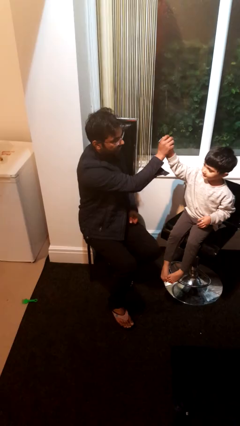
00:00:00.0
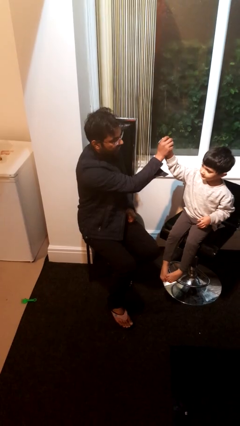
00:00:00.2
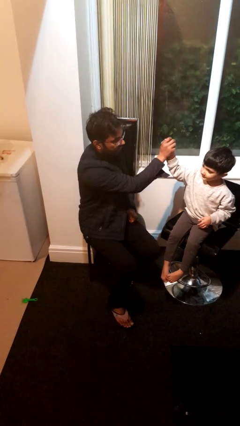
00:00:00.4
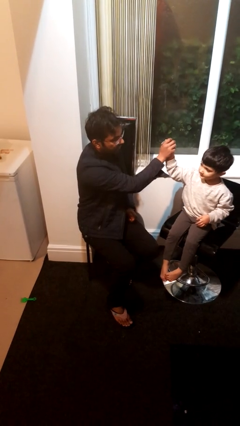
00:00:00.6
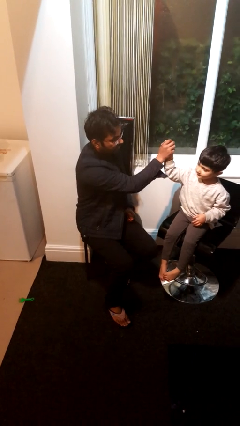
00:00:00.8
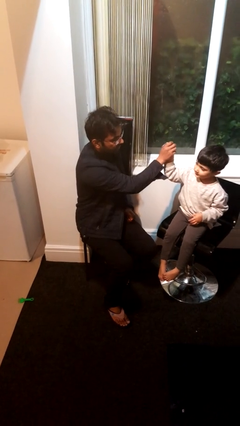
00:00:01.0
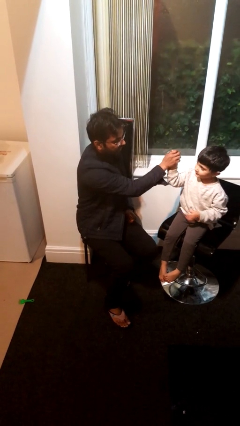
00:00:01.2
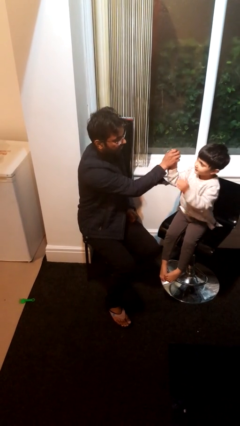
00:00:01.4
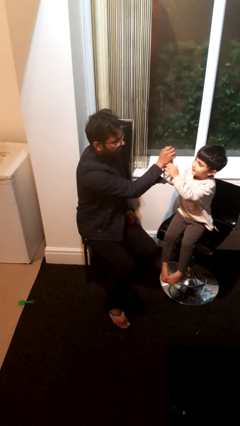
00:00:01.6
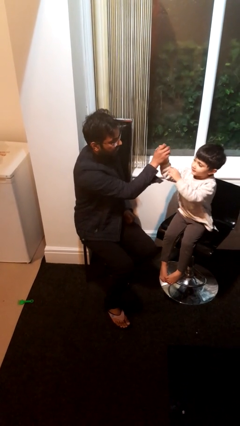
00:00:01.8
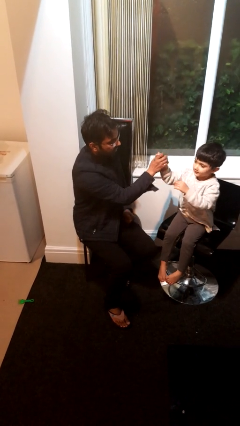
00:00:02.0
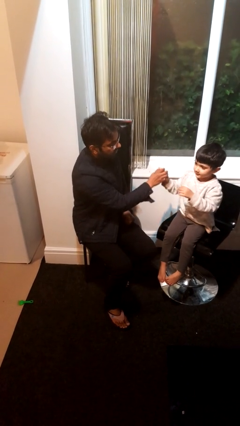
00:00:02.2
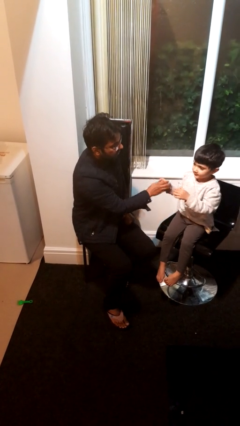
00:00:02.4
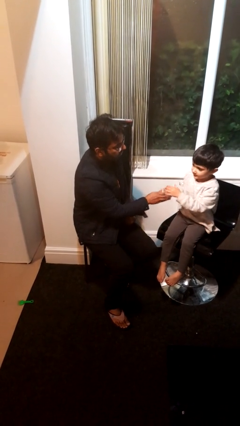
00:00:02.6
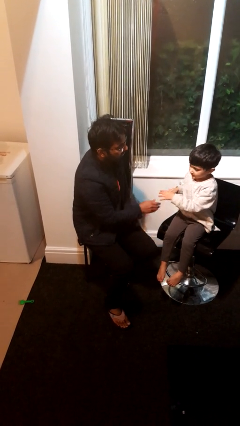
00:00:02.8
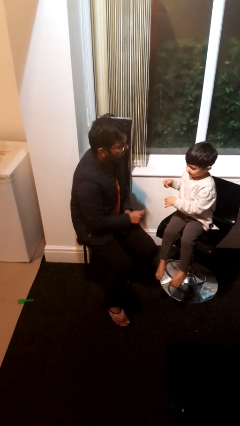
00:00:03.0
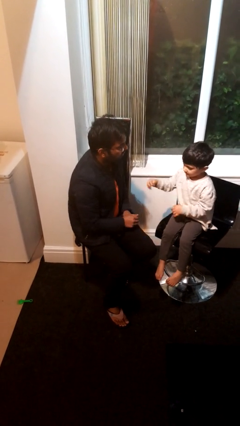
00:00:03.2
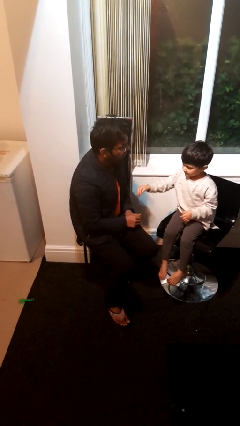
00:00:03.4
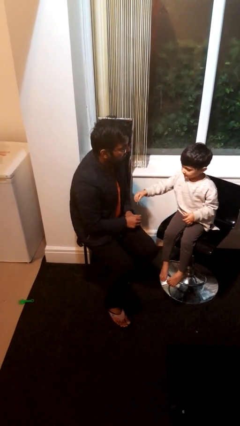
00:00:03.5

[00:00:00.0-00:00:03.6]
person highfives hand

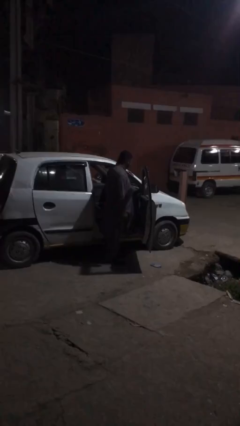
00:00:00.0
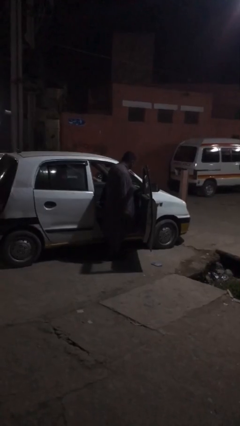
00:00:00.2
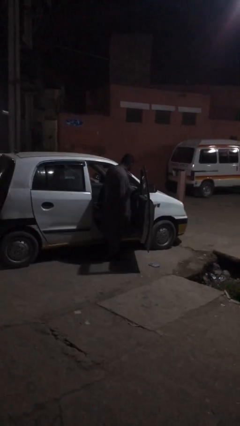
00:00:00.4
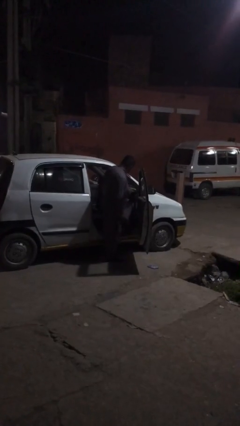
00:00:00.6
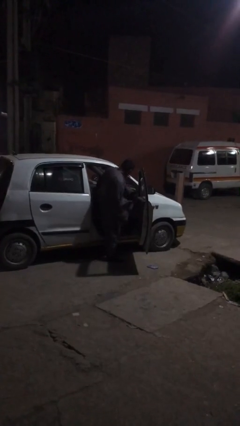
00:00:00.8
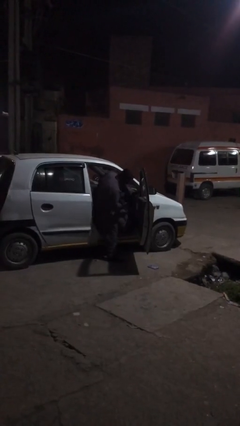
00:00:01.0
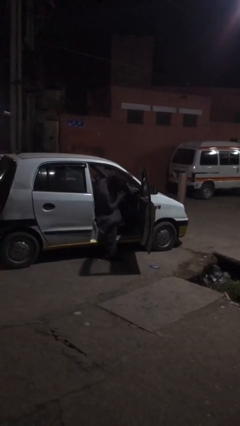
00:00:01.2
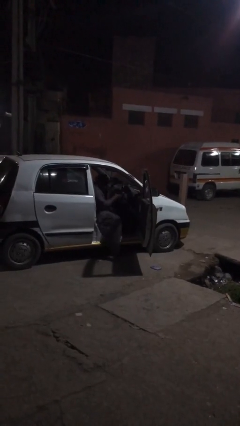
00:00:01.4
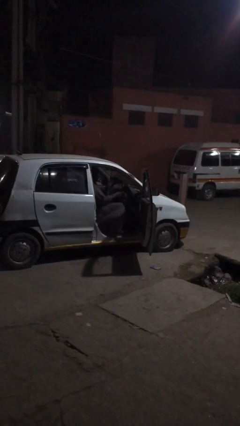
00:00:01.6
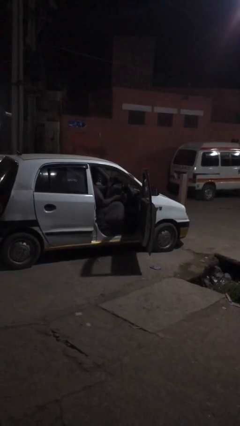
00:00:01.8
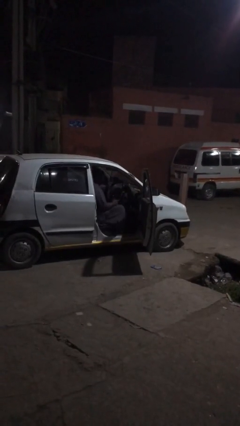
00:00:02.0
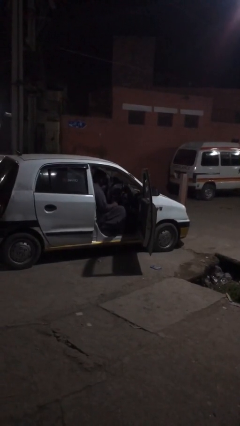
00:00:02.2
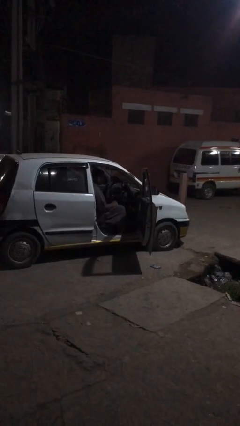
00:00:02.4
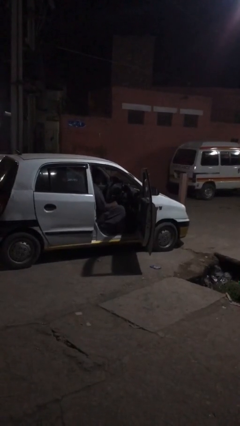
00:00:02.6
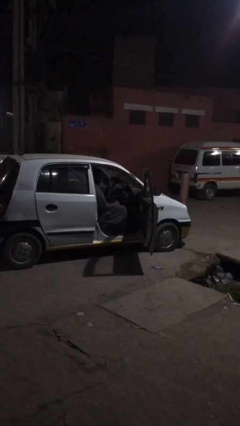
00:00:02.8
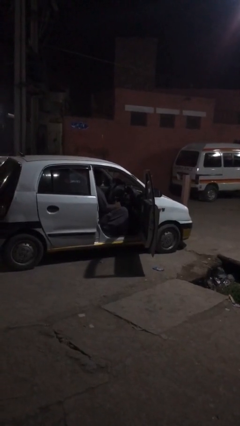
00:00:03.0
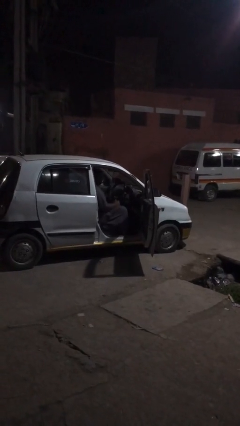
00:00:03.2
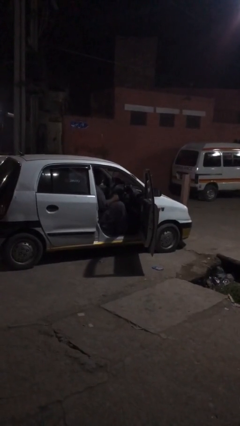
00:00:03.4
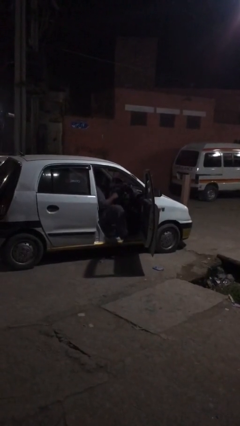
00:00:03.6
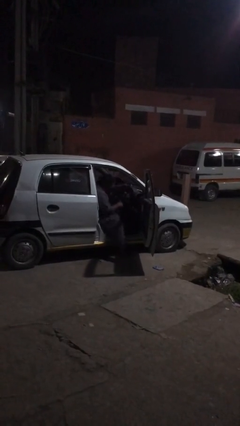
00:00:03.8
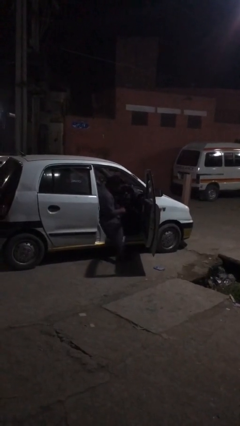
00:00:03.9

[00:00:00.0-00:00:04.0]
person enters car

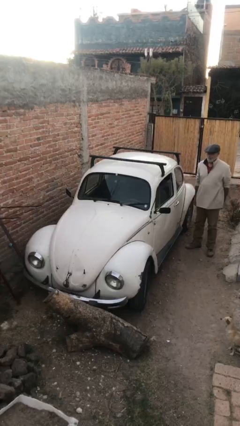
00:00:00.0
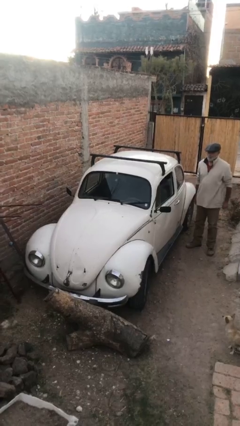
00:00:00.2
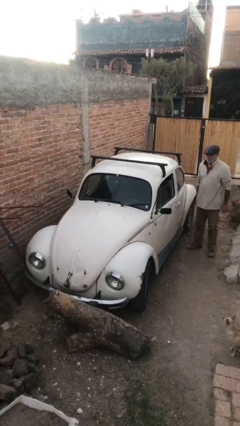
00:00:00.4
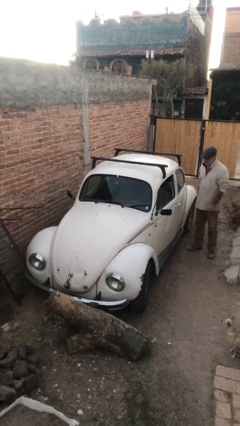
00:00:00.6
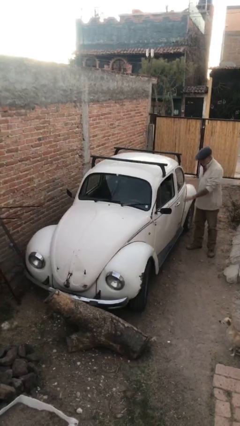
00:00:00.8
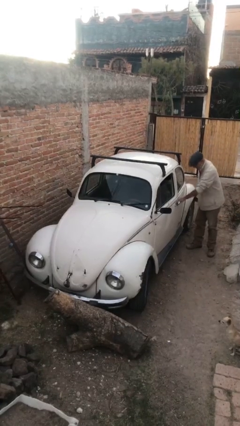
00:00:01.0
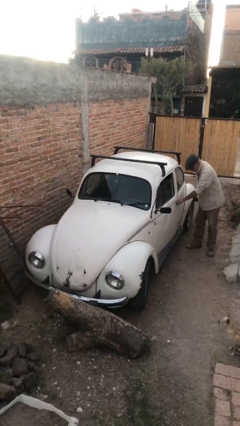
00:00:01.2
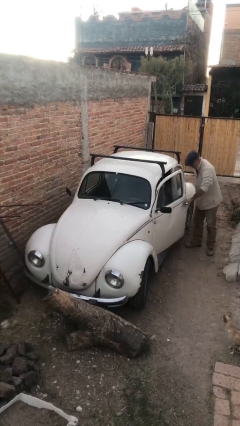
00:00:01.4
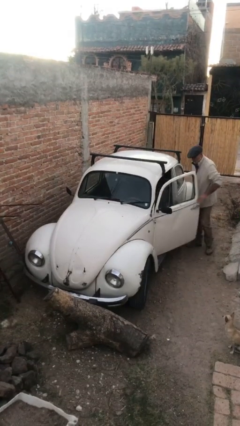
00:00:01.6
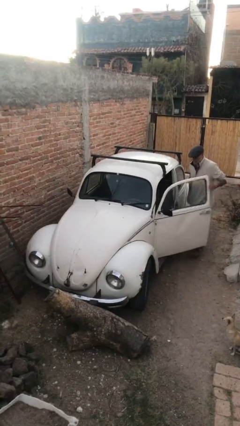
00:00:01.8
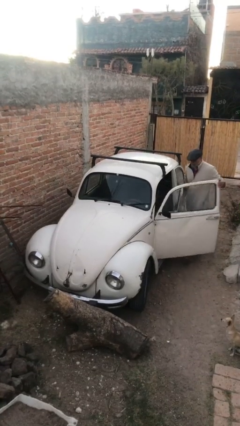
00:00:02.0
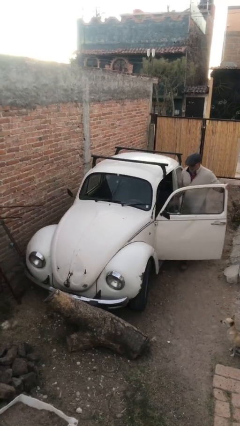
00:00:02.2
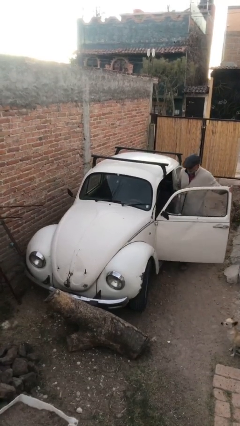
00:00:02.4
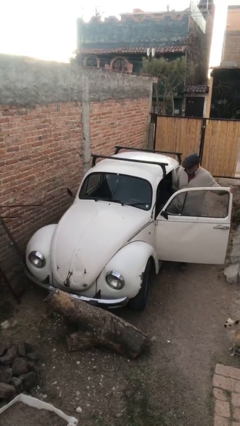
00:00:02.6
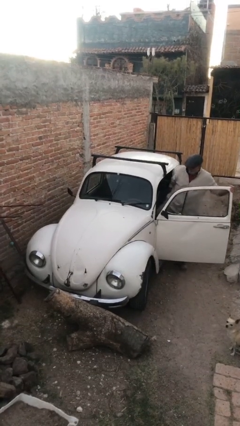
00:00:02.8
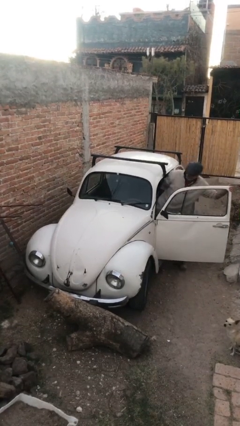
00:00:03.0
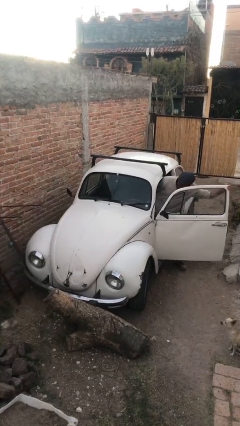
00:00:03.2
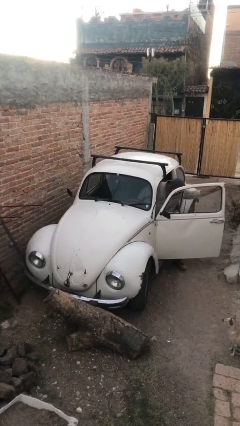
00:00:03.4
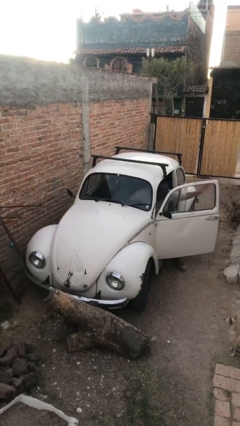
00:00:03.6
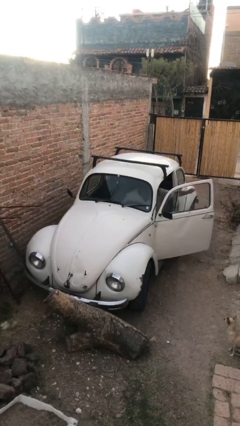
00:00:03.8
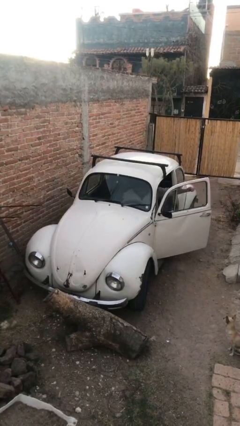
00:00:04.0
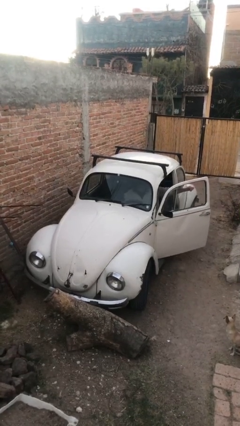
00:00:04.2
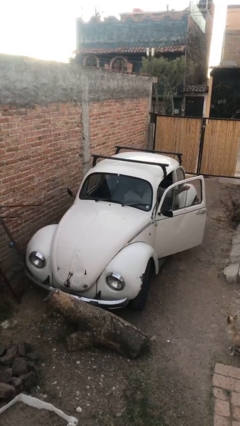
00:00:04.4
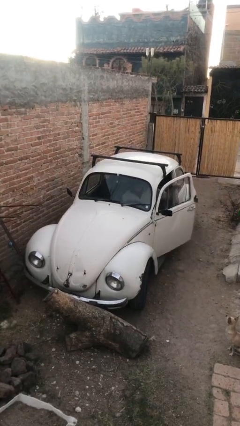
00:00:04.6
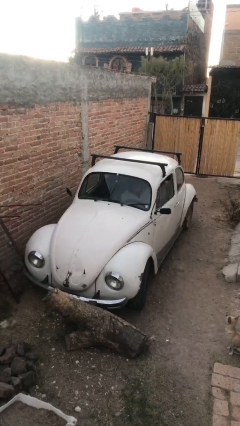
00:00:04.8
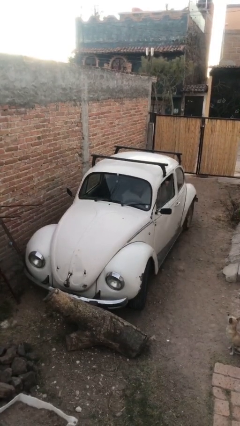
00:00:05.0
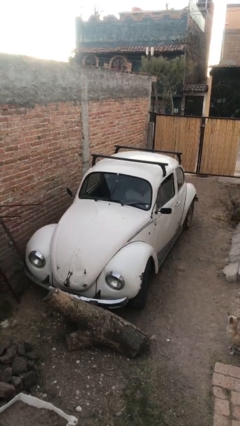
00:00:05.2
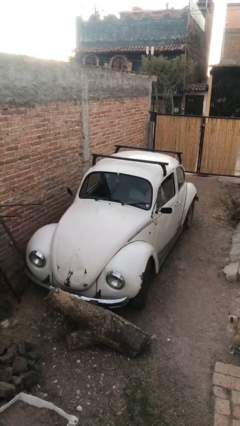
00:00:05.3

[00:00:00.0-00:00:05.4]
car picks up person

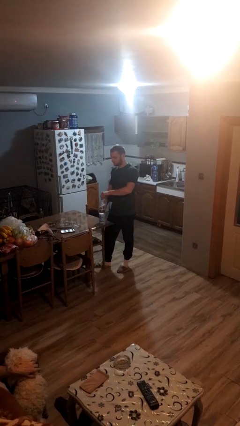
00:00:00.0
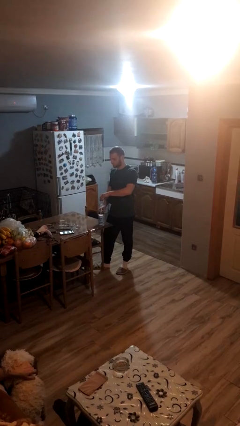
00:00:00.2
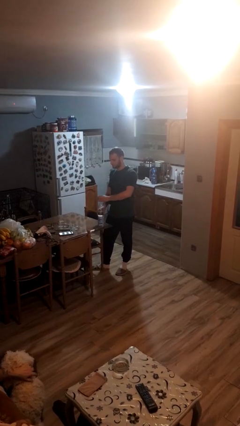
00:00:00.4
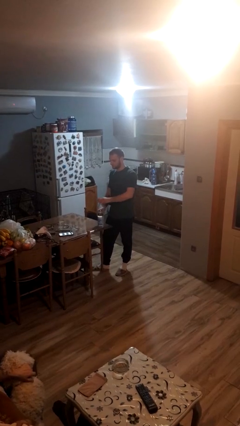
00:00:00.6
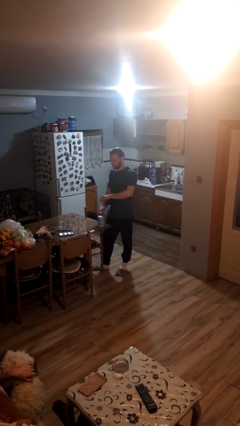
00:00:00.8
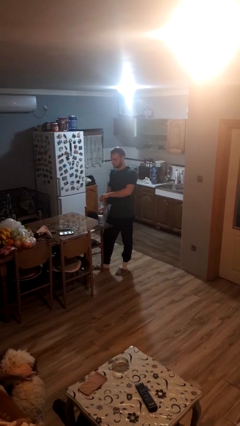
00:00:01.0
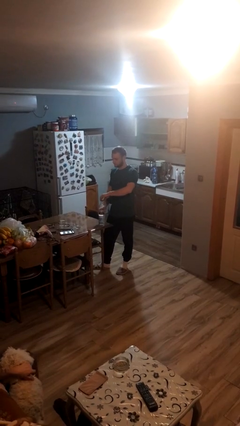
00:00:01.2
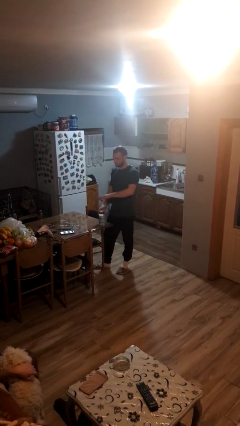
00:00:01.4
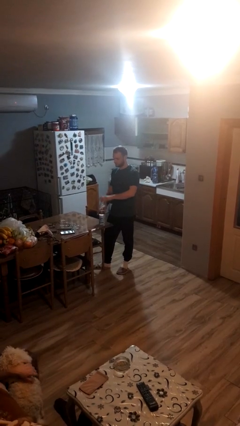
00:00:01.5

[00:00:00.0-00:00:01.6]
person screws lid to bottle

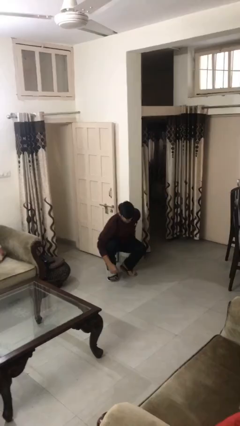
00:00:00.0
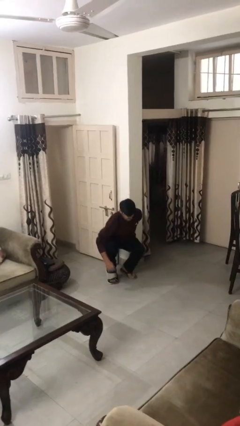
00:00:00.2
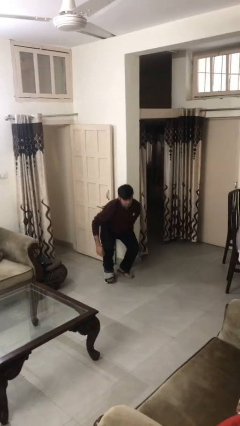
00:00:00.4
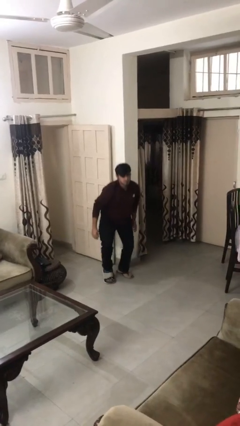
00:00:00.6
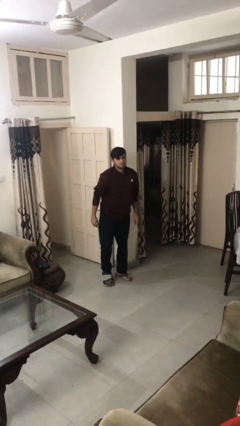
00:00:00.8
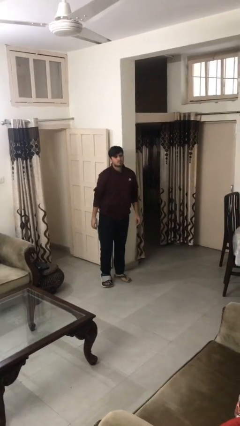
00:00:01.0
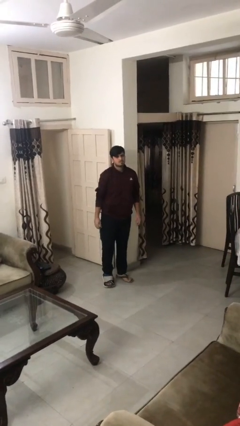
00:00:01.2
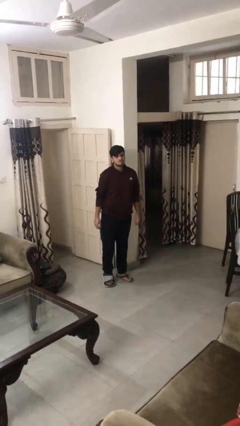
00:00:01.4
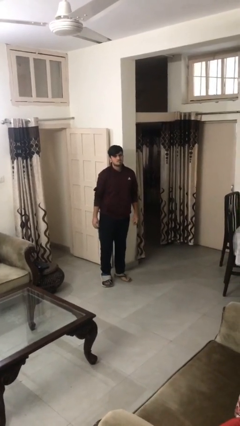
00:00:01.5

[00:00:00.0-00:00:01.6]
person stands up

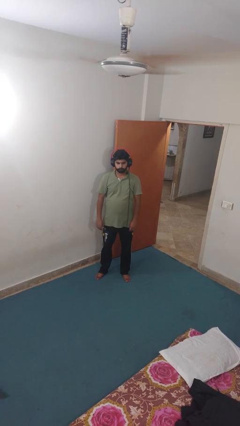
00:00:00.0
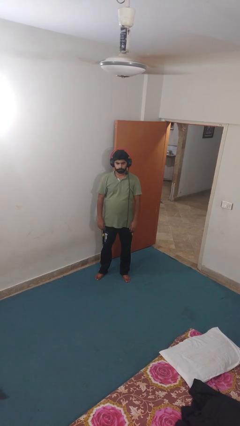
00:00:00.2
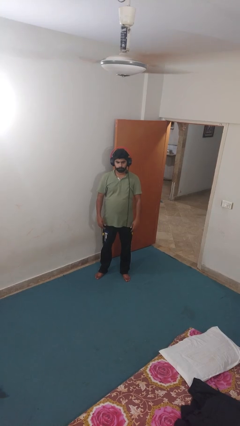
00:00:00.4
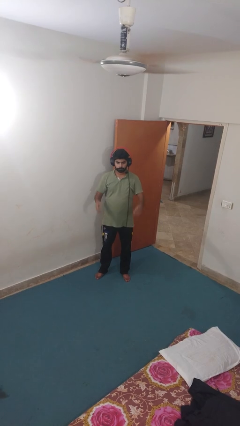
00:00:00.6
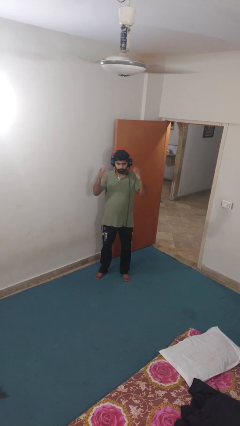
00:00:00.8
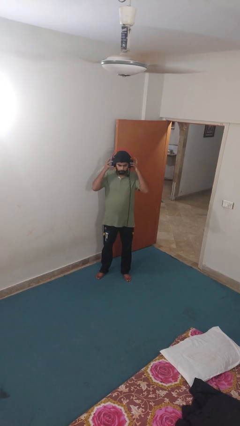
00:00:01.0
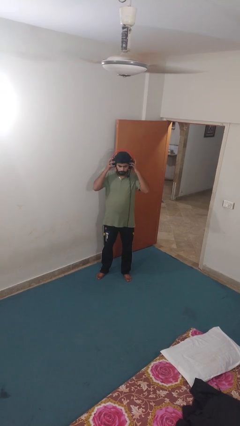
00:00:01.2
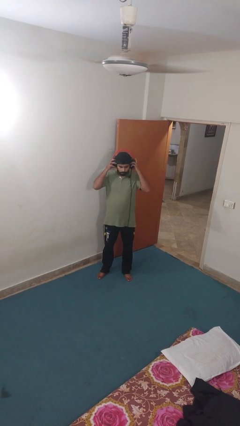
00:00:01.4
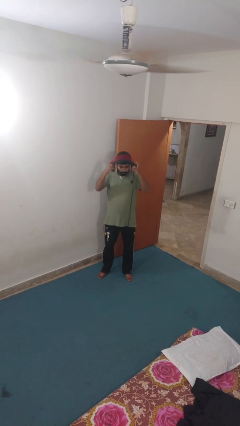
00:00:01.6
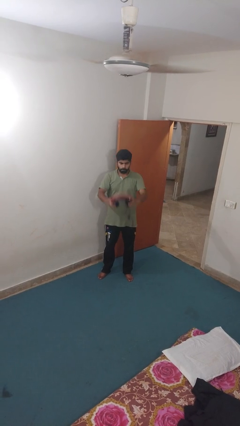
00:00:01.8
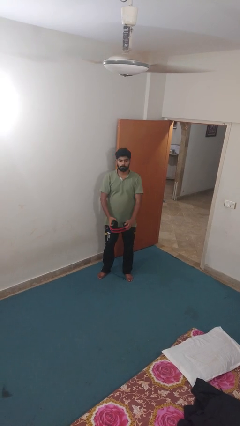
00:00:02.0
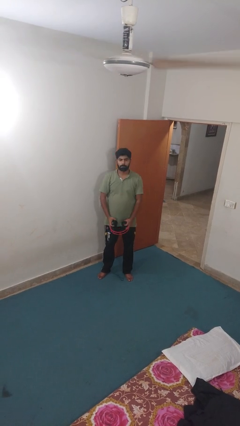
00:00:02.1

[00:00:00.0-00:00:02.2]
person takes off headphones
